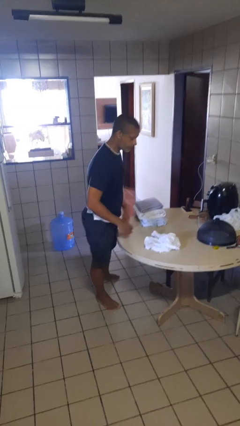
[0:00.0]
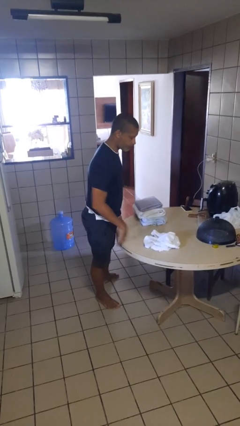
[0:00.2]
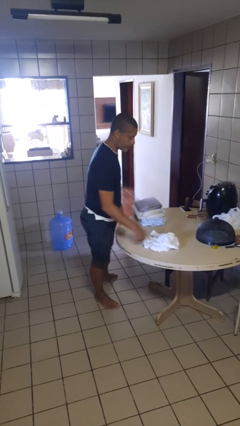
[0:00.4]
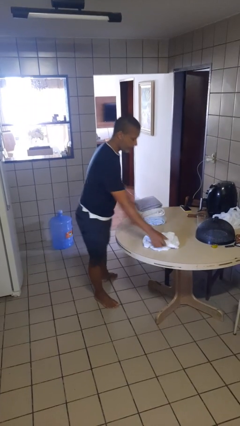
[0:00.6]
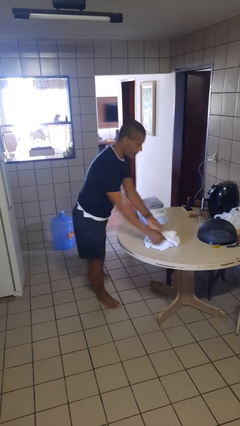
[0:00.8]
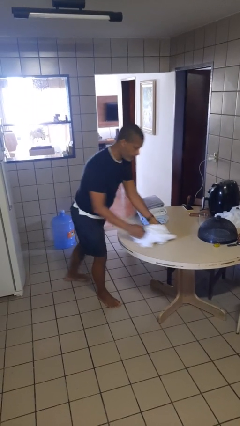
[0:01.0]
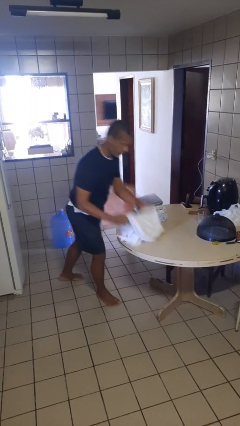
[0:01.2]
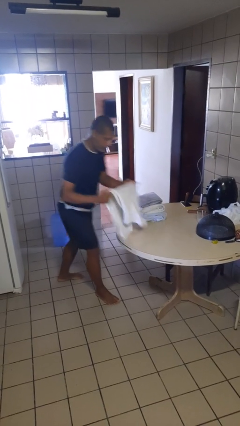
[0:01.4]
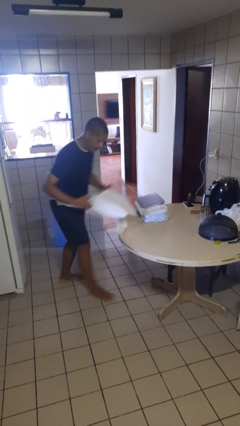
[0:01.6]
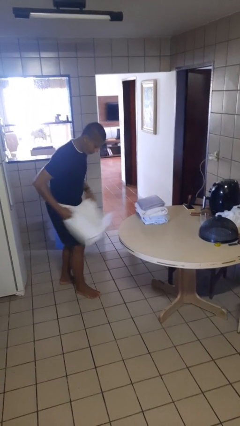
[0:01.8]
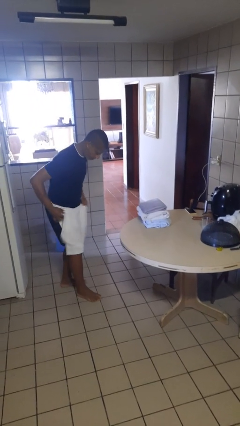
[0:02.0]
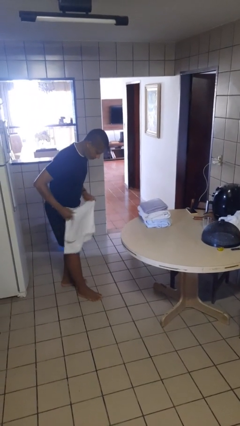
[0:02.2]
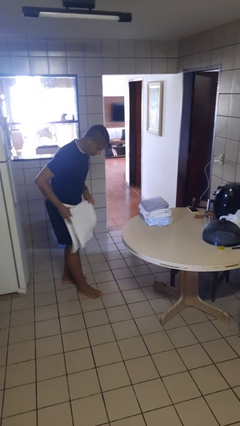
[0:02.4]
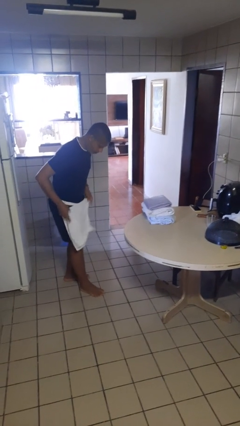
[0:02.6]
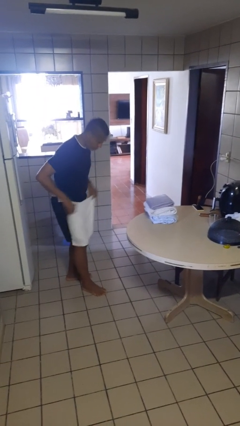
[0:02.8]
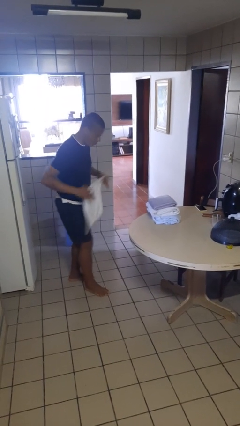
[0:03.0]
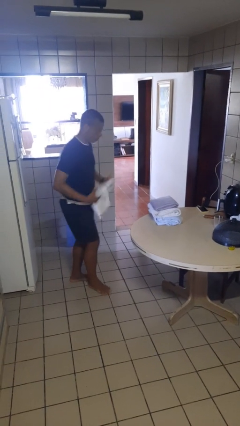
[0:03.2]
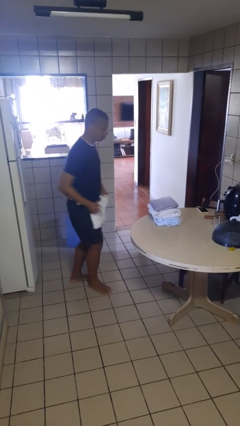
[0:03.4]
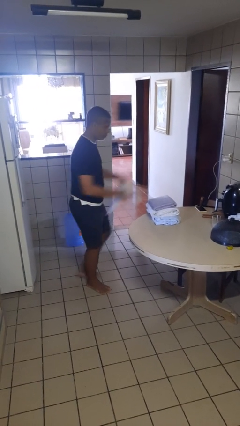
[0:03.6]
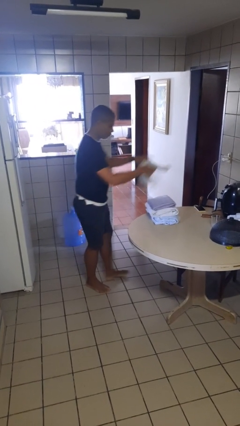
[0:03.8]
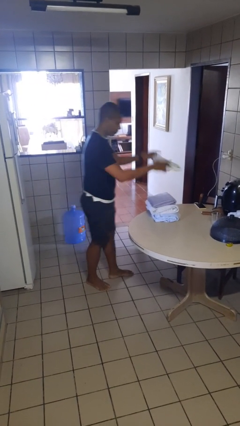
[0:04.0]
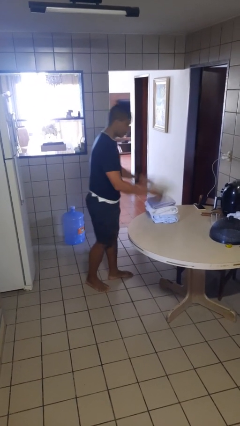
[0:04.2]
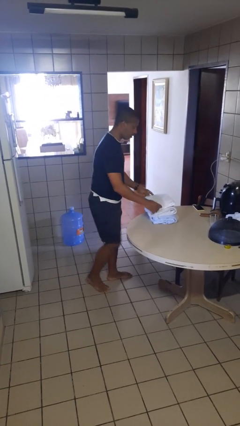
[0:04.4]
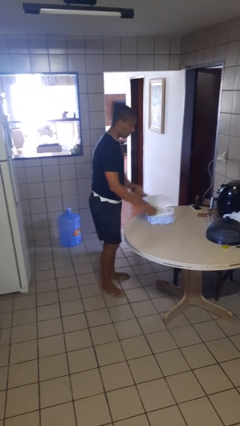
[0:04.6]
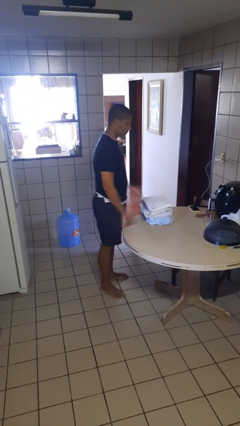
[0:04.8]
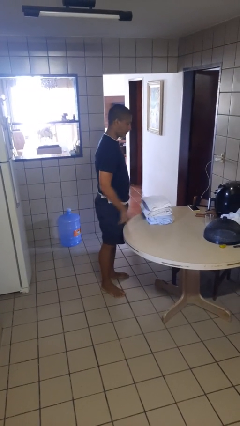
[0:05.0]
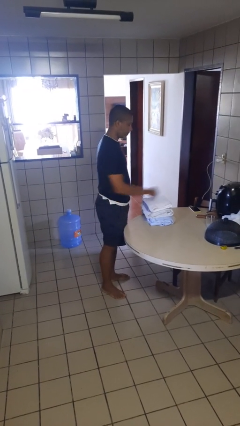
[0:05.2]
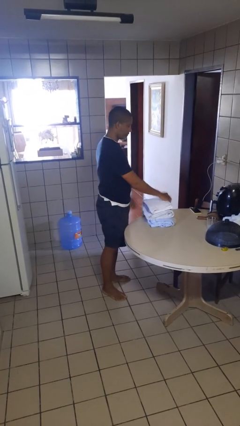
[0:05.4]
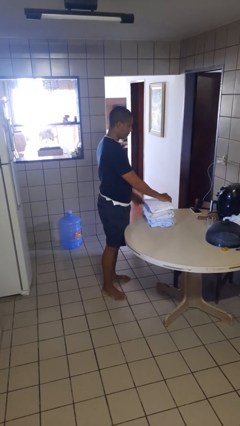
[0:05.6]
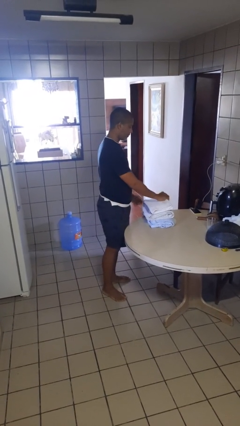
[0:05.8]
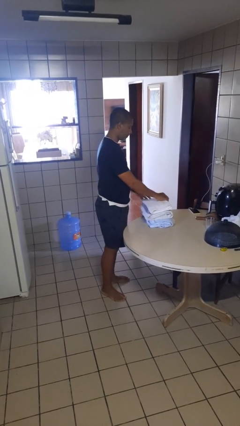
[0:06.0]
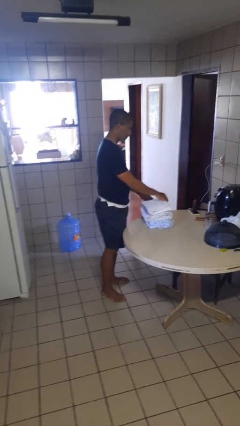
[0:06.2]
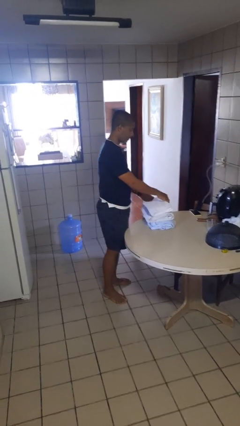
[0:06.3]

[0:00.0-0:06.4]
person folds towel

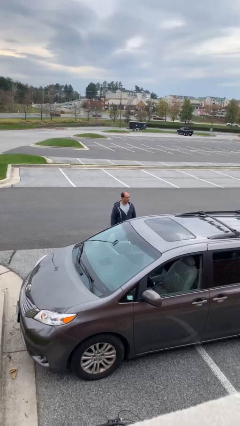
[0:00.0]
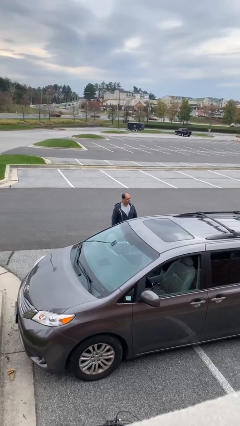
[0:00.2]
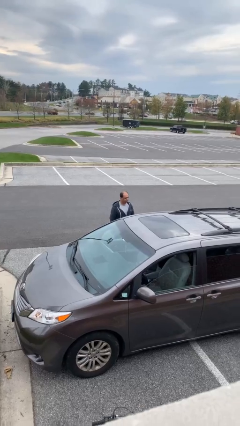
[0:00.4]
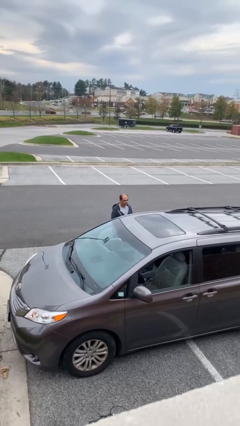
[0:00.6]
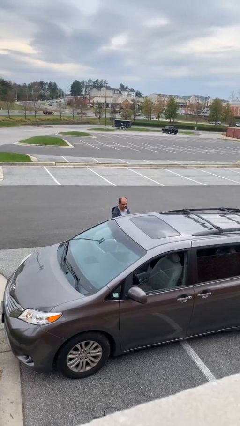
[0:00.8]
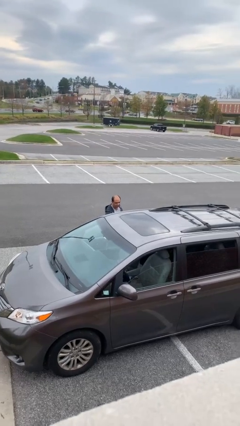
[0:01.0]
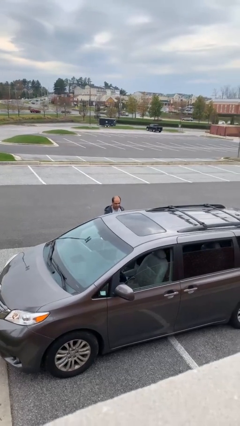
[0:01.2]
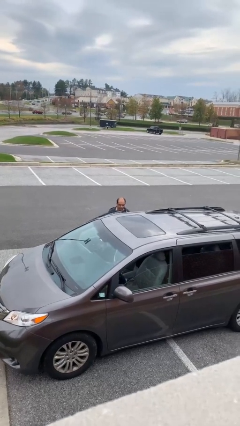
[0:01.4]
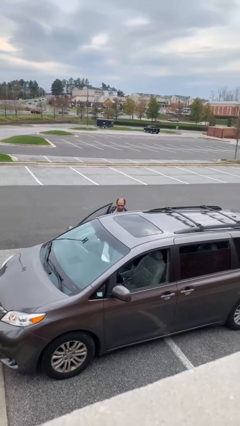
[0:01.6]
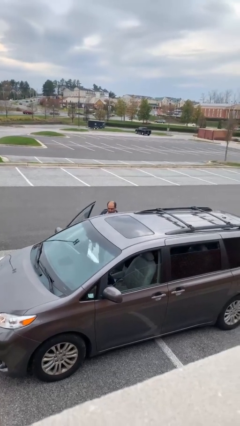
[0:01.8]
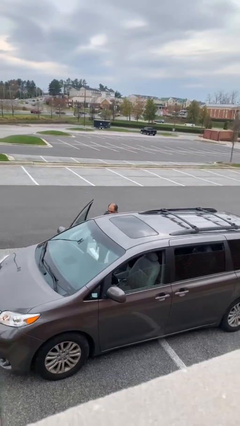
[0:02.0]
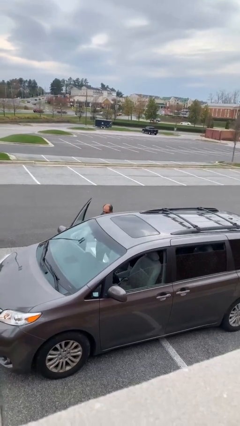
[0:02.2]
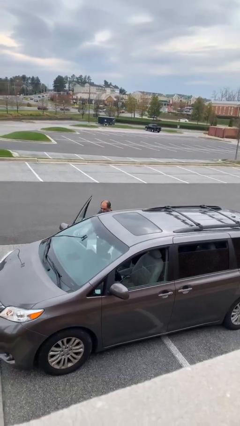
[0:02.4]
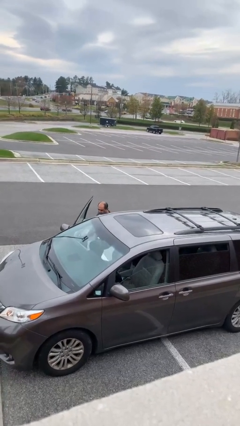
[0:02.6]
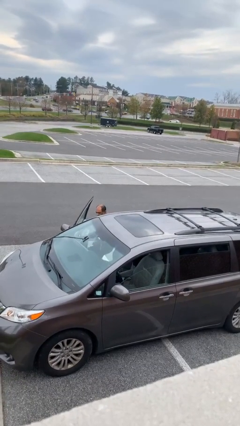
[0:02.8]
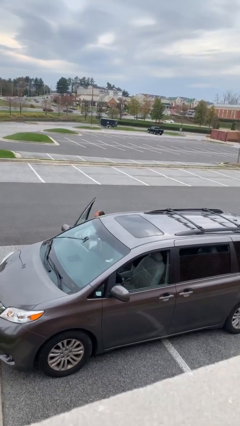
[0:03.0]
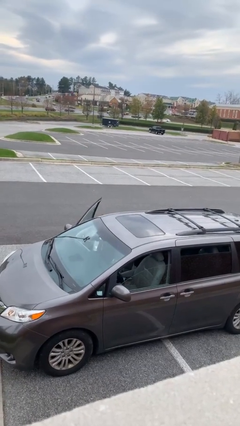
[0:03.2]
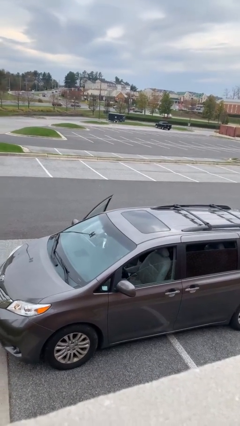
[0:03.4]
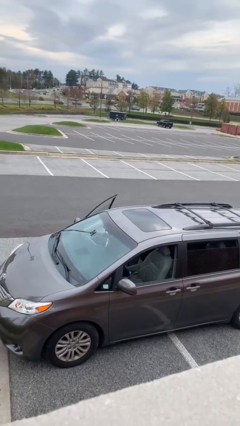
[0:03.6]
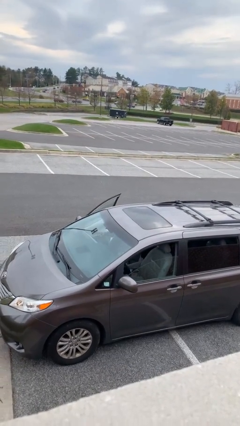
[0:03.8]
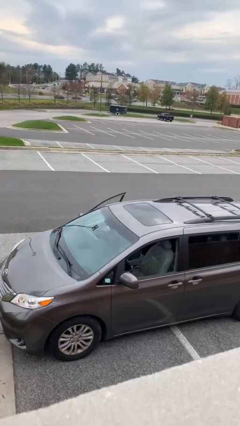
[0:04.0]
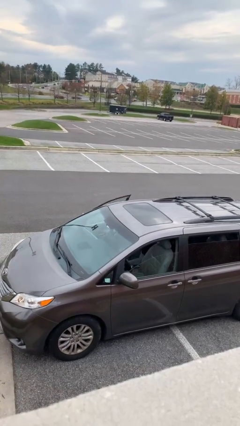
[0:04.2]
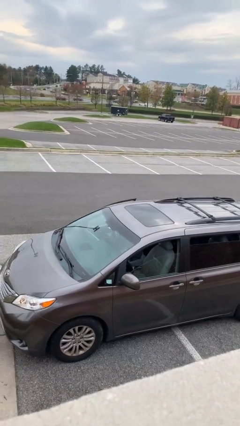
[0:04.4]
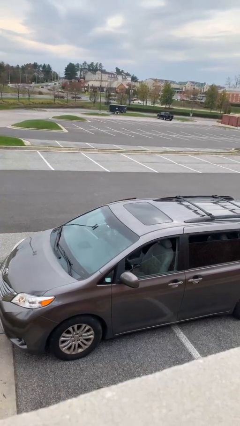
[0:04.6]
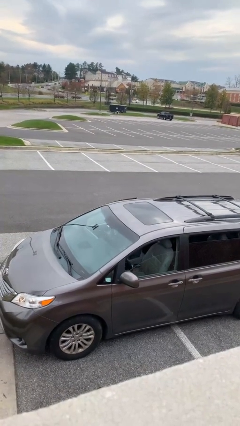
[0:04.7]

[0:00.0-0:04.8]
car picks up person

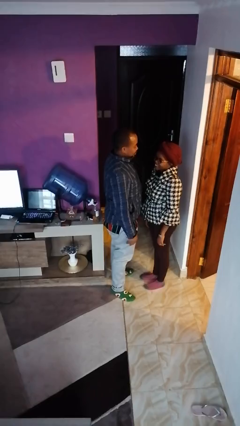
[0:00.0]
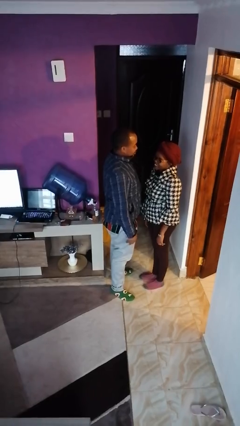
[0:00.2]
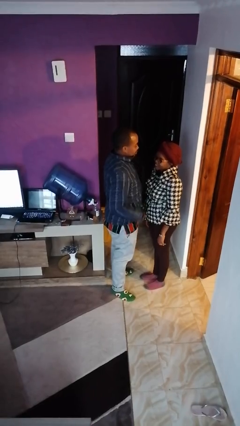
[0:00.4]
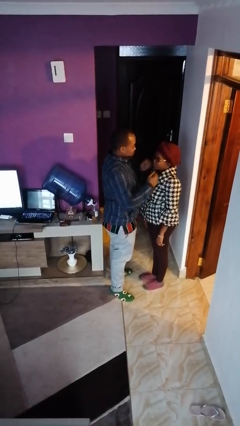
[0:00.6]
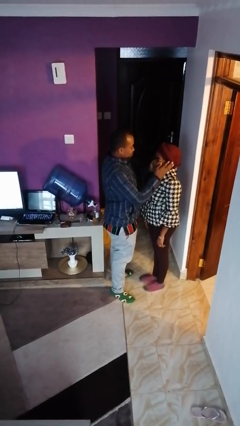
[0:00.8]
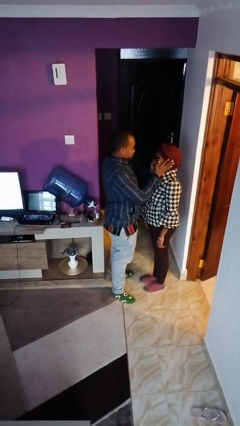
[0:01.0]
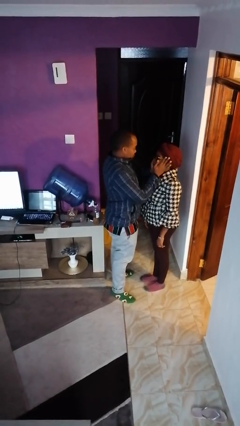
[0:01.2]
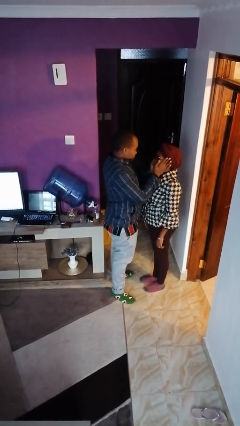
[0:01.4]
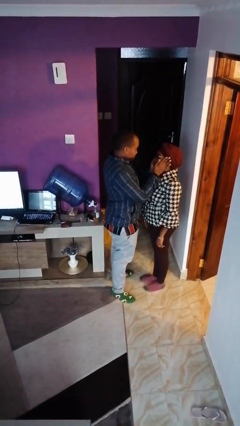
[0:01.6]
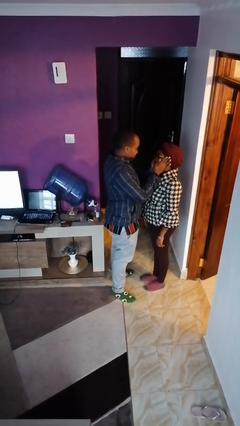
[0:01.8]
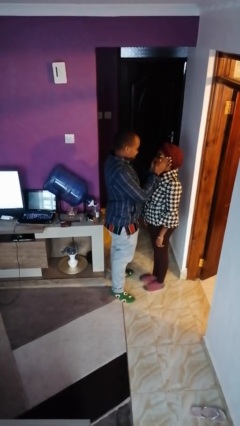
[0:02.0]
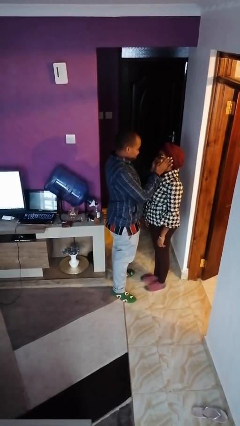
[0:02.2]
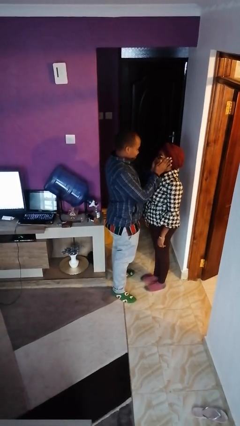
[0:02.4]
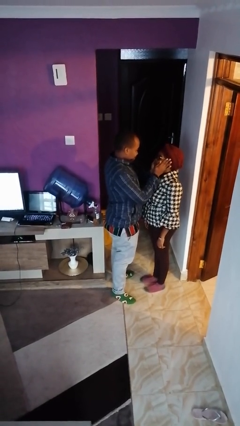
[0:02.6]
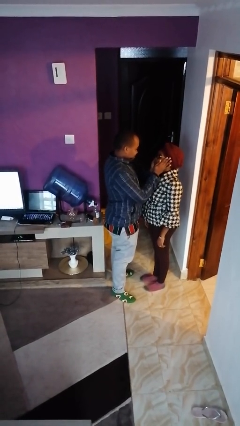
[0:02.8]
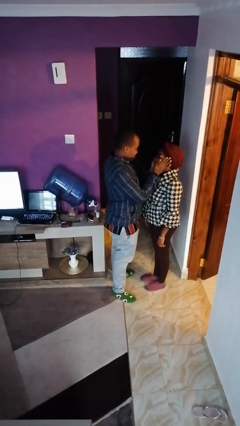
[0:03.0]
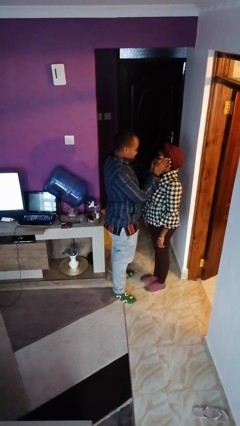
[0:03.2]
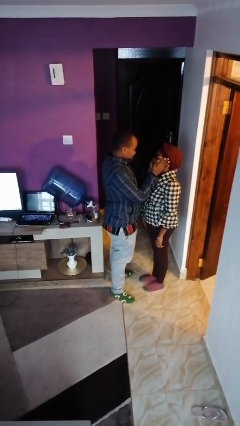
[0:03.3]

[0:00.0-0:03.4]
person touches face of person

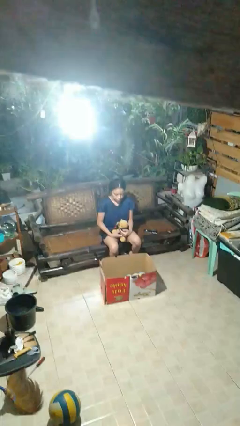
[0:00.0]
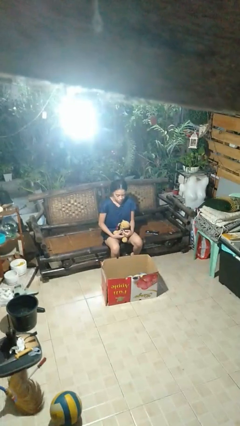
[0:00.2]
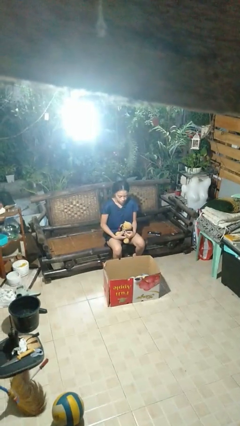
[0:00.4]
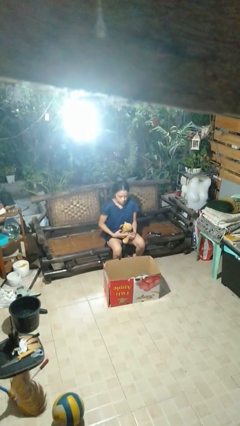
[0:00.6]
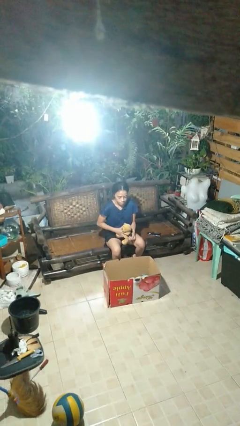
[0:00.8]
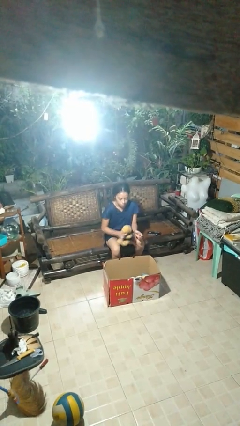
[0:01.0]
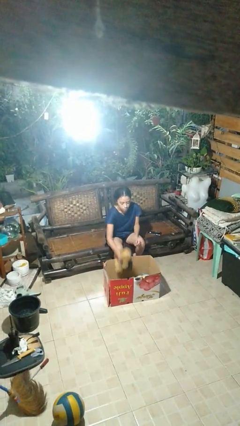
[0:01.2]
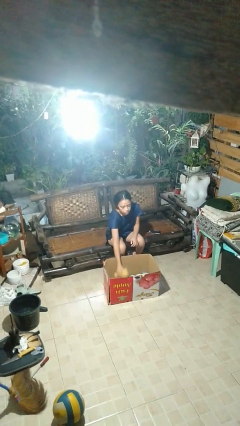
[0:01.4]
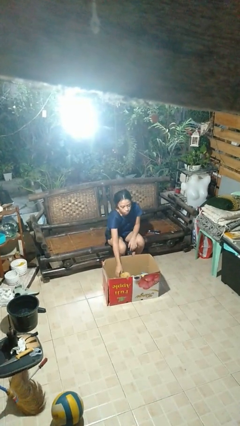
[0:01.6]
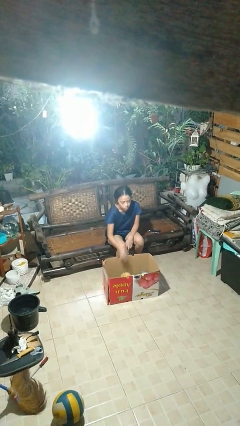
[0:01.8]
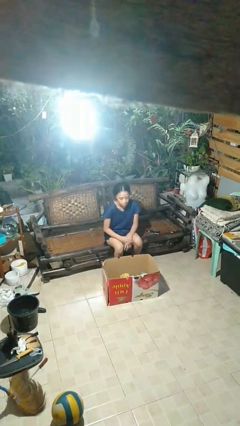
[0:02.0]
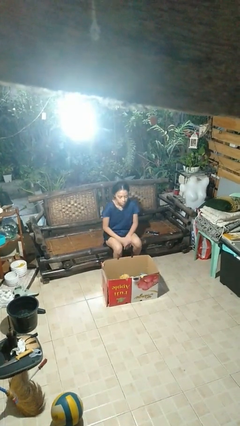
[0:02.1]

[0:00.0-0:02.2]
person puts object into box

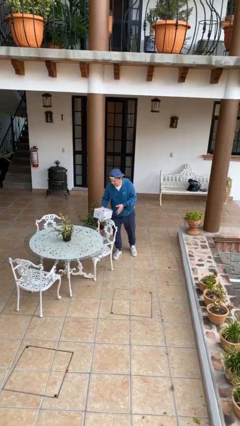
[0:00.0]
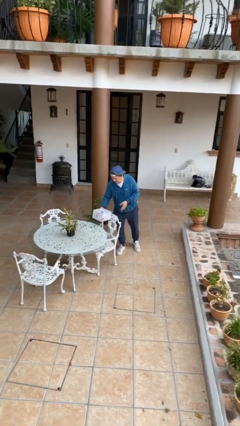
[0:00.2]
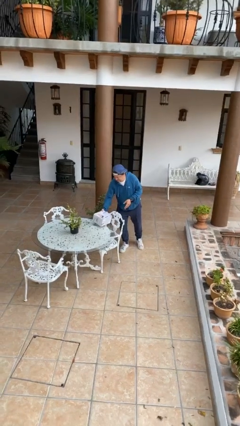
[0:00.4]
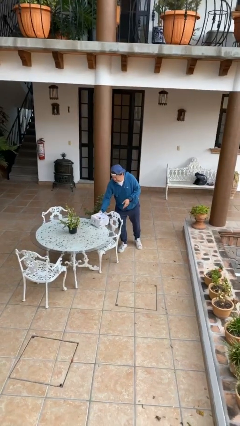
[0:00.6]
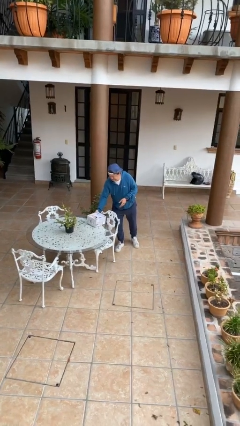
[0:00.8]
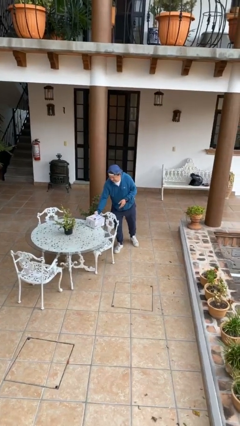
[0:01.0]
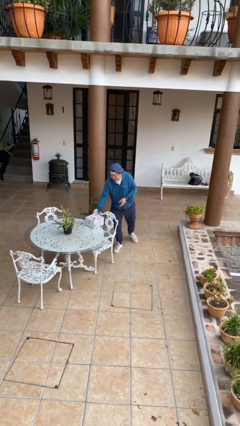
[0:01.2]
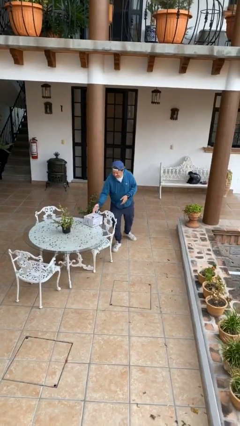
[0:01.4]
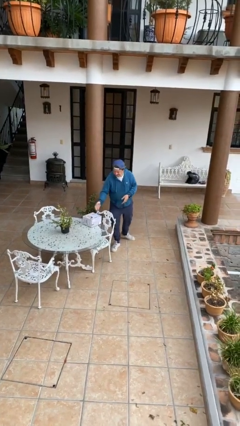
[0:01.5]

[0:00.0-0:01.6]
person puts down object on table
